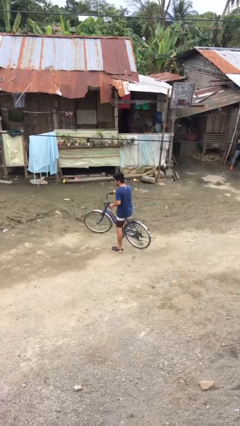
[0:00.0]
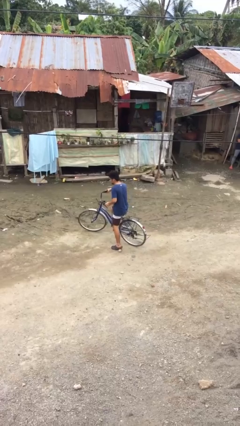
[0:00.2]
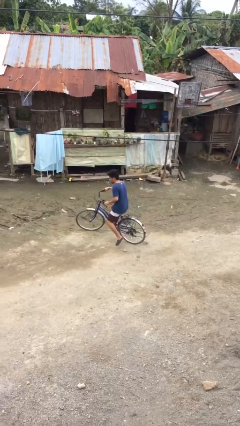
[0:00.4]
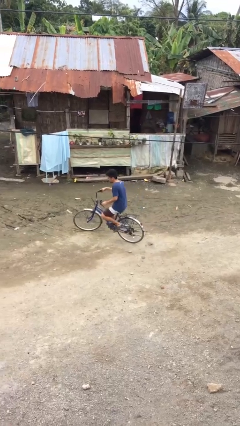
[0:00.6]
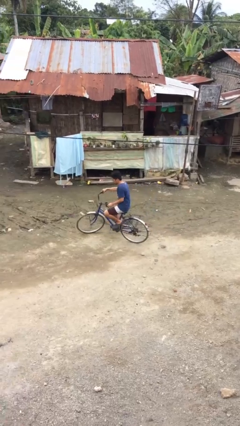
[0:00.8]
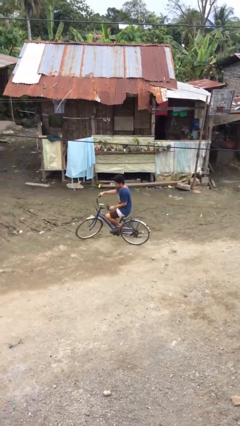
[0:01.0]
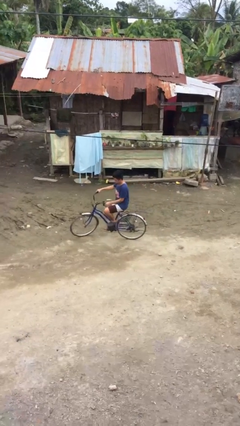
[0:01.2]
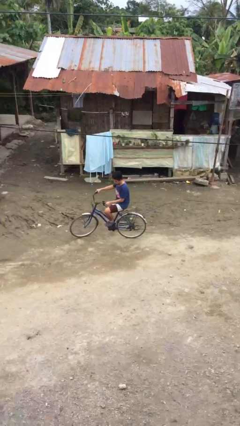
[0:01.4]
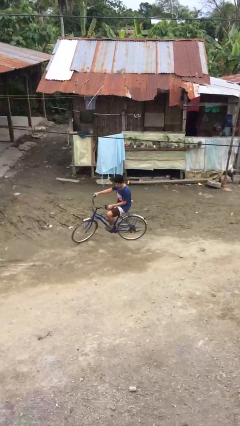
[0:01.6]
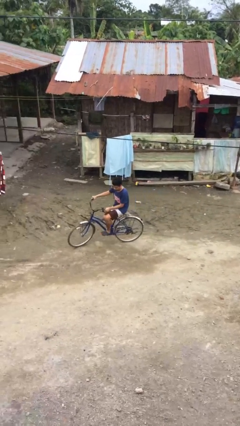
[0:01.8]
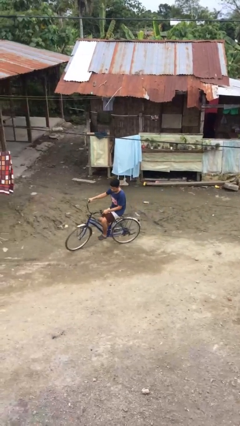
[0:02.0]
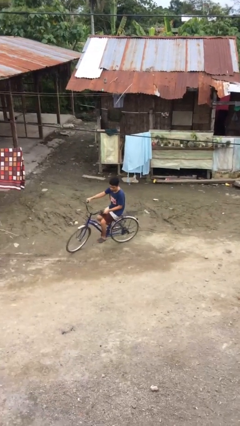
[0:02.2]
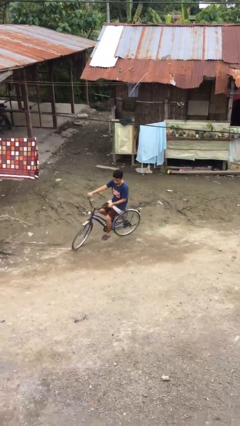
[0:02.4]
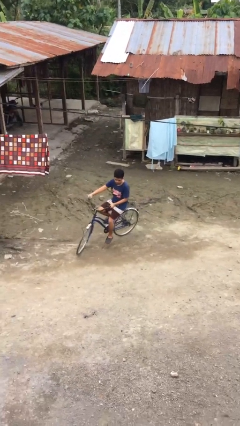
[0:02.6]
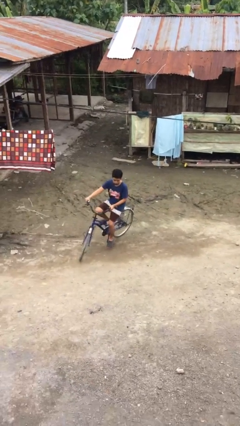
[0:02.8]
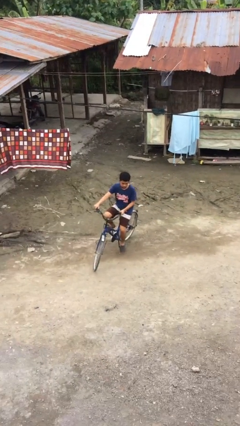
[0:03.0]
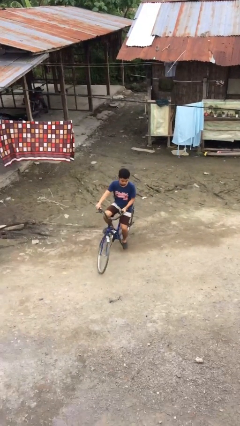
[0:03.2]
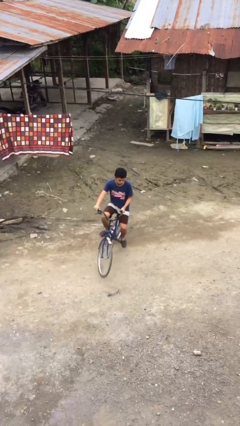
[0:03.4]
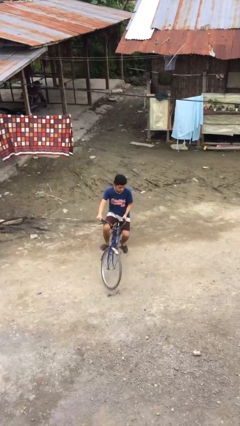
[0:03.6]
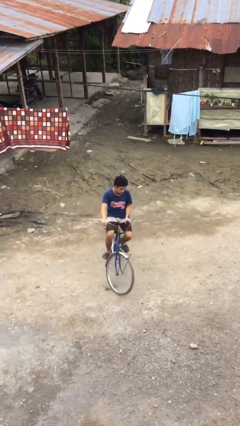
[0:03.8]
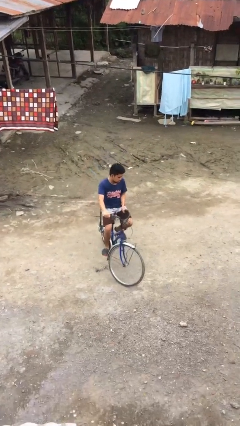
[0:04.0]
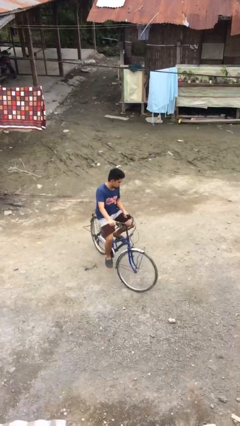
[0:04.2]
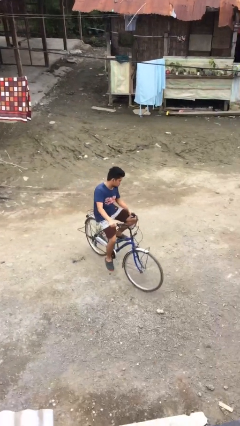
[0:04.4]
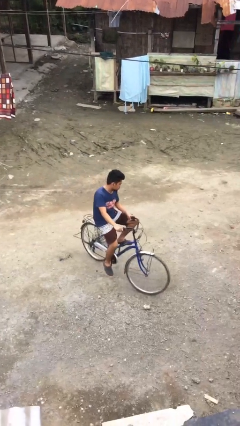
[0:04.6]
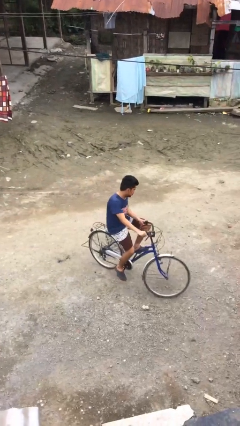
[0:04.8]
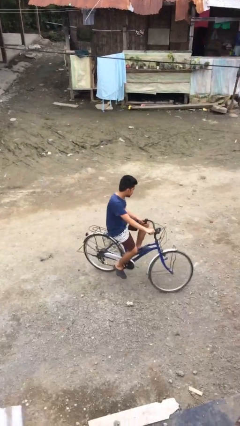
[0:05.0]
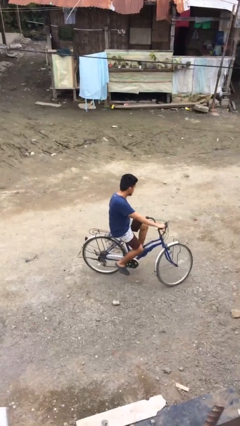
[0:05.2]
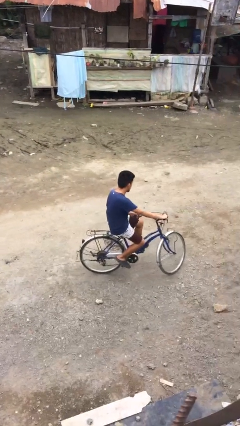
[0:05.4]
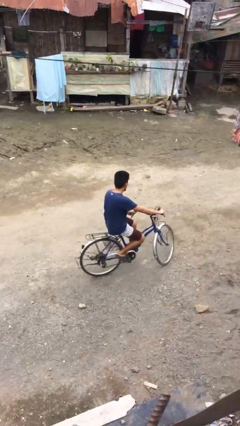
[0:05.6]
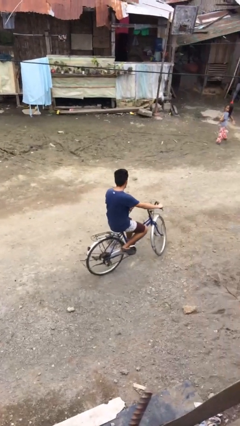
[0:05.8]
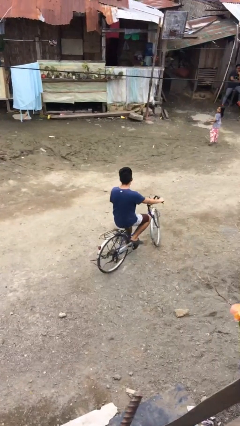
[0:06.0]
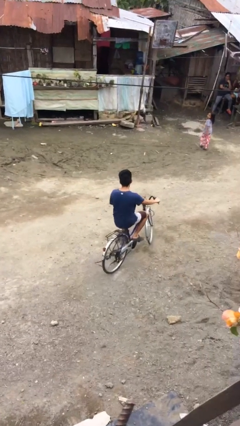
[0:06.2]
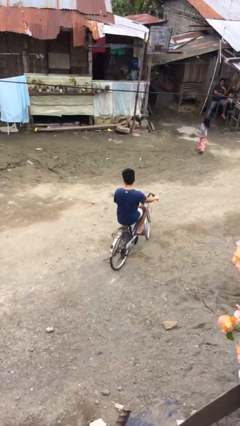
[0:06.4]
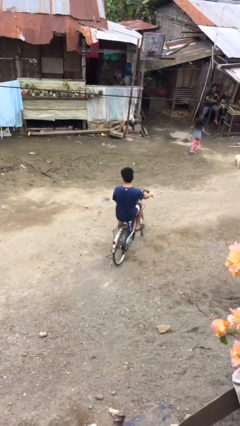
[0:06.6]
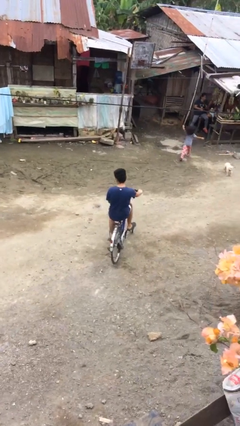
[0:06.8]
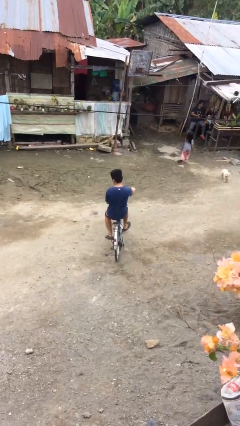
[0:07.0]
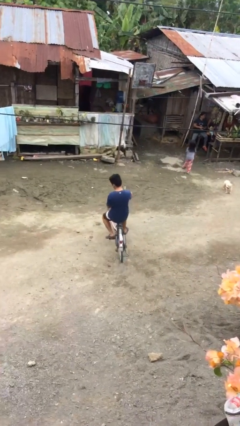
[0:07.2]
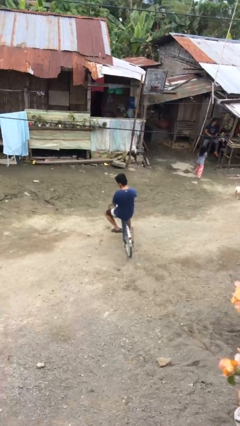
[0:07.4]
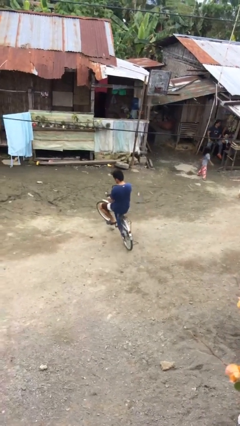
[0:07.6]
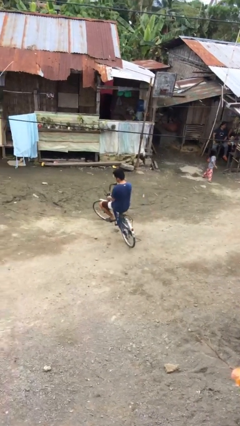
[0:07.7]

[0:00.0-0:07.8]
person rides bicycle

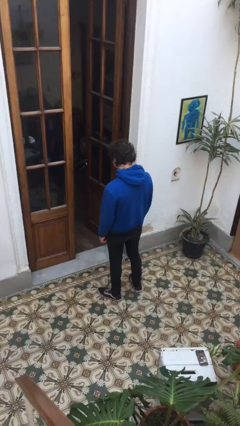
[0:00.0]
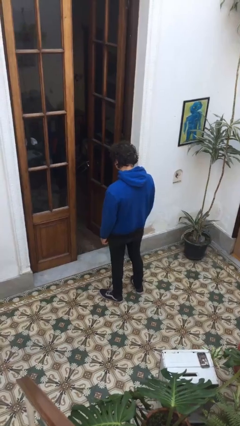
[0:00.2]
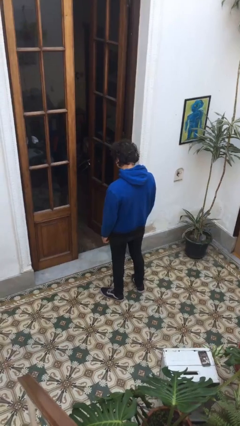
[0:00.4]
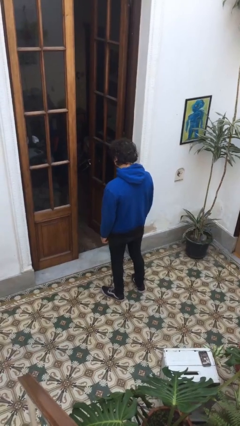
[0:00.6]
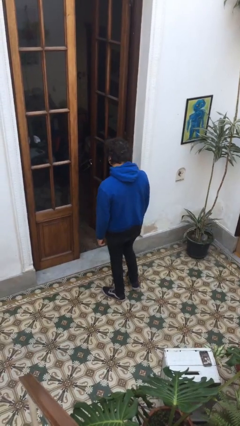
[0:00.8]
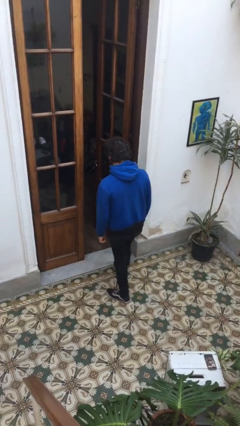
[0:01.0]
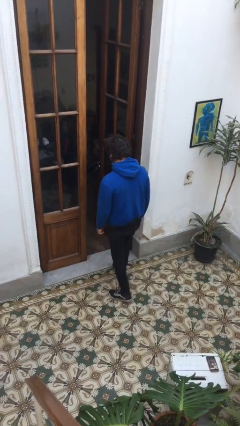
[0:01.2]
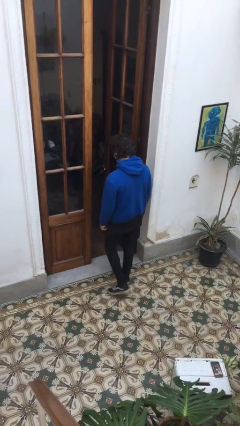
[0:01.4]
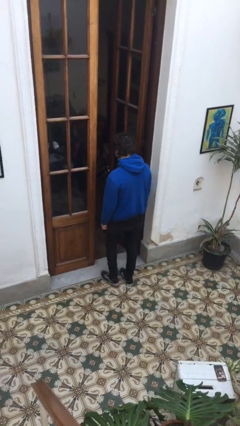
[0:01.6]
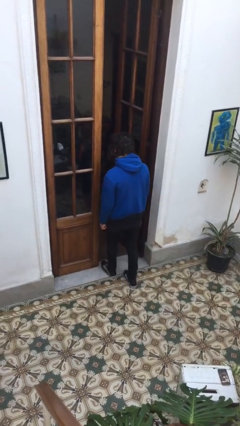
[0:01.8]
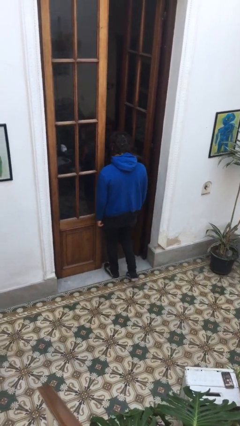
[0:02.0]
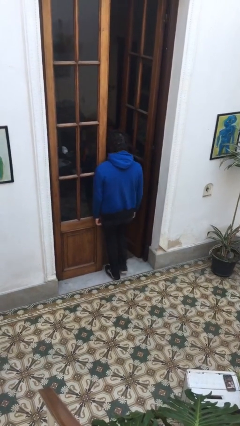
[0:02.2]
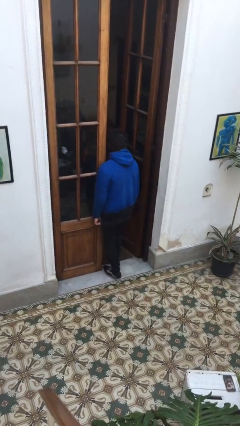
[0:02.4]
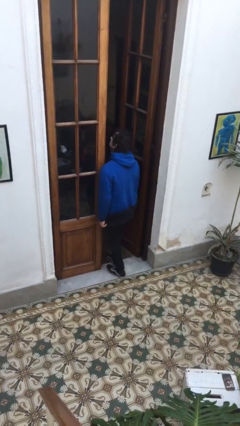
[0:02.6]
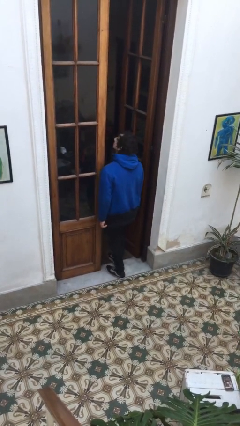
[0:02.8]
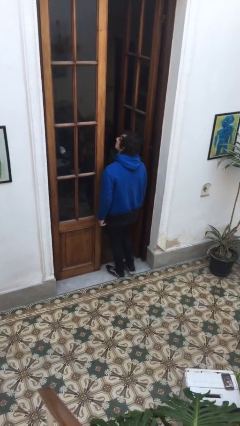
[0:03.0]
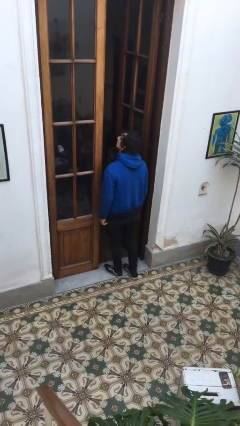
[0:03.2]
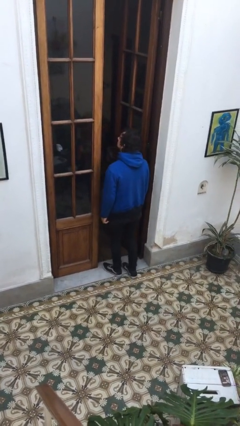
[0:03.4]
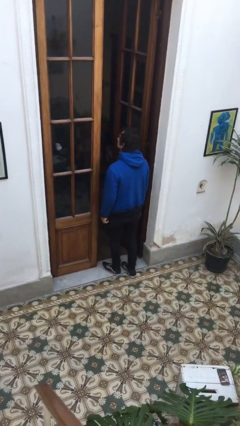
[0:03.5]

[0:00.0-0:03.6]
person bumps into wall

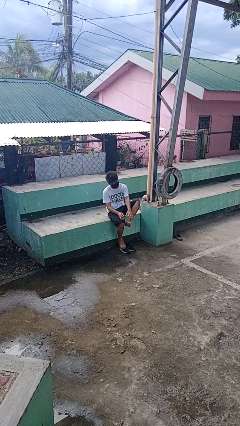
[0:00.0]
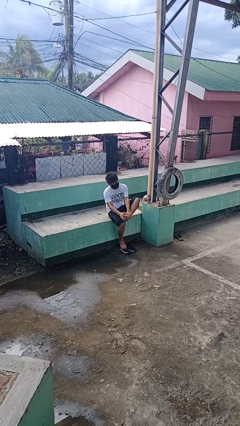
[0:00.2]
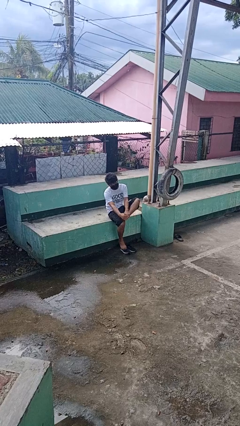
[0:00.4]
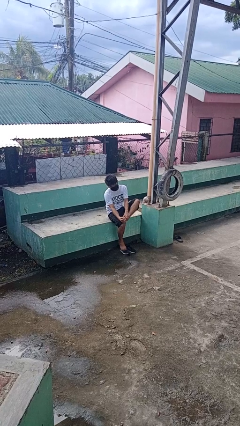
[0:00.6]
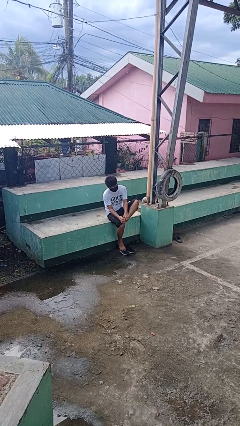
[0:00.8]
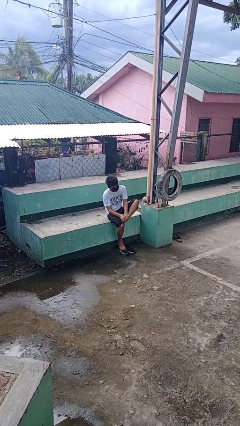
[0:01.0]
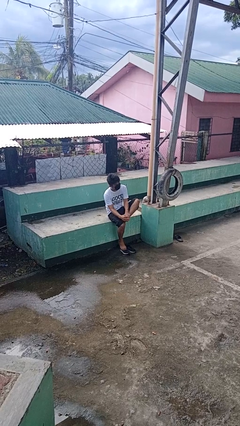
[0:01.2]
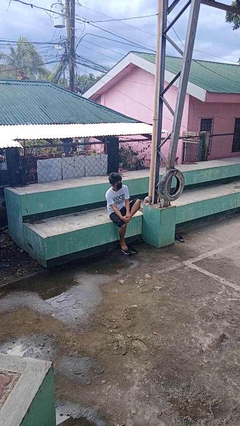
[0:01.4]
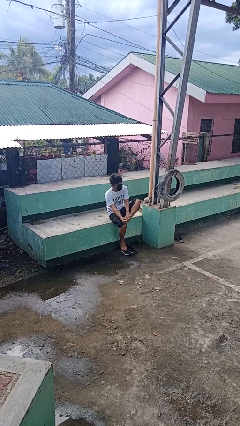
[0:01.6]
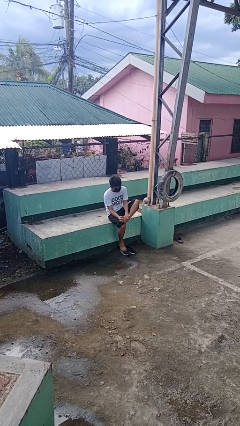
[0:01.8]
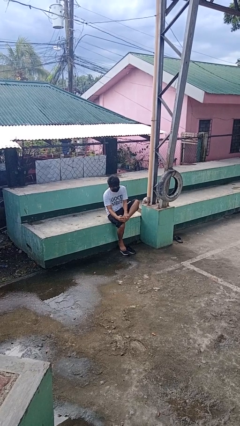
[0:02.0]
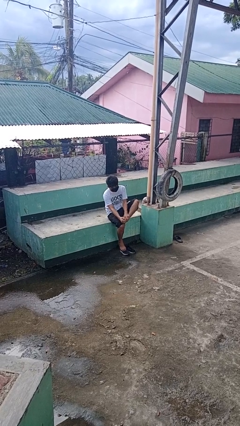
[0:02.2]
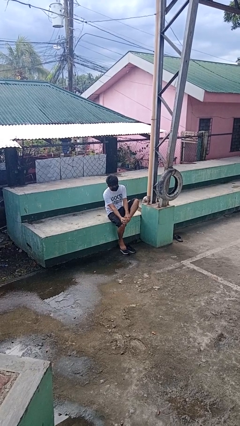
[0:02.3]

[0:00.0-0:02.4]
person rubs foot

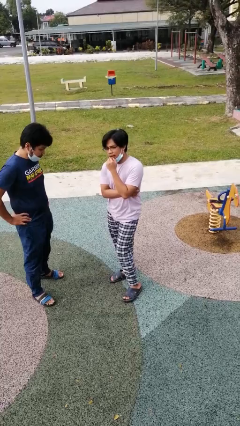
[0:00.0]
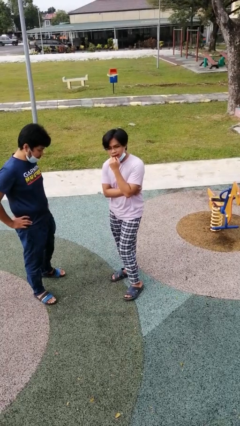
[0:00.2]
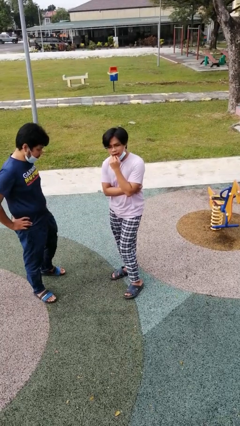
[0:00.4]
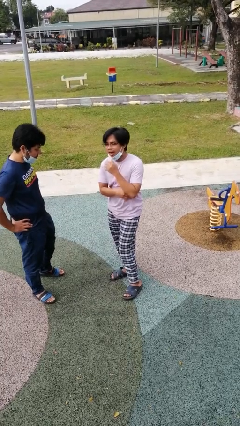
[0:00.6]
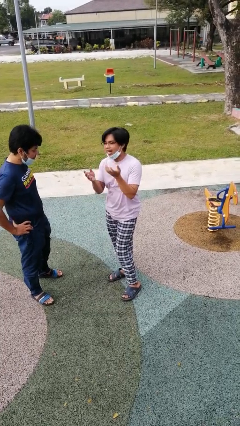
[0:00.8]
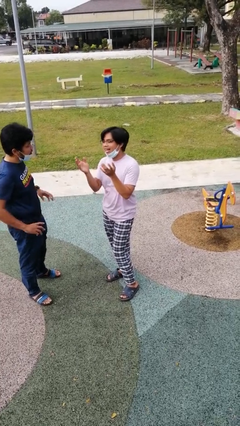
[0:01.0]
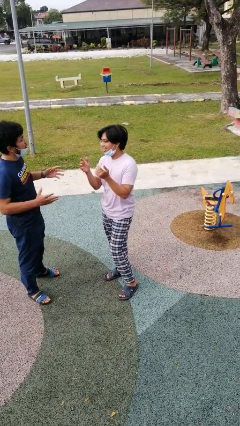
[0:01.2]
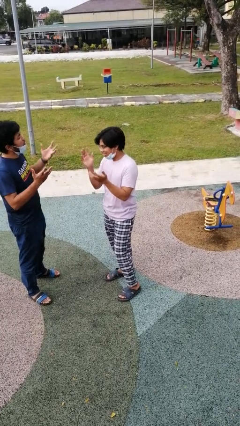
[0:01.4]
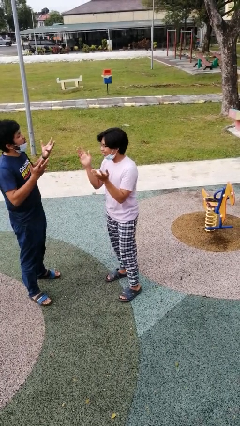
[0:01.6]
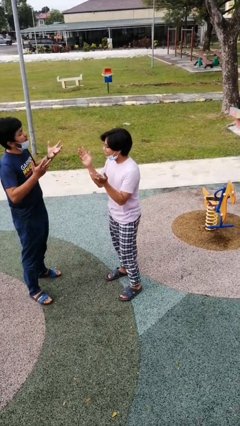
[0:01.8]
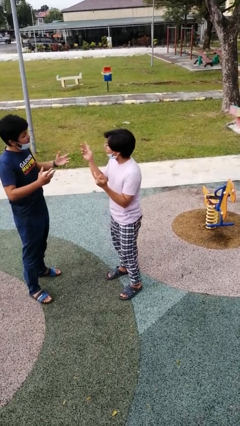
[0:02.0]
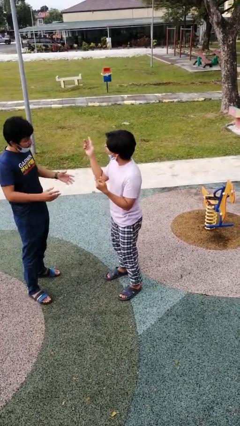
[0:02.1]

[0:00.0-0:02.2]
person talks to person

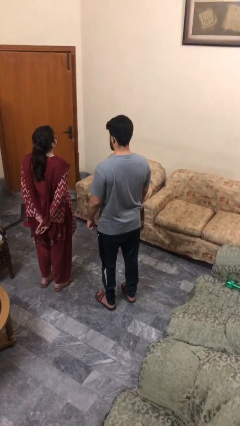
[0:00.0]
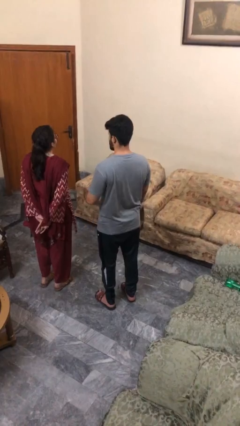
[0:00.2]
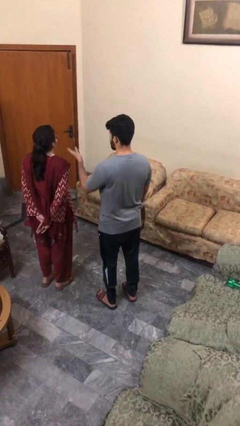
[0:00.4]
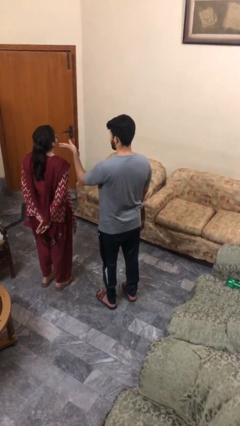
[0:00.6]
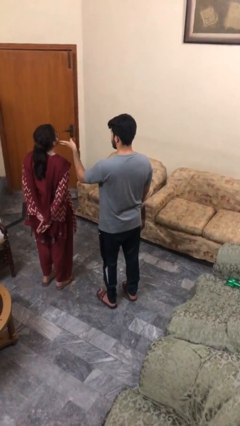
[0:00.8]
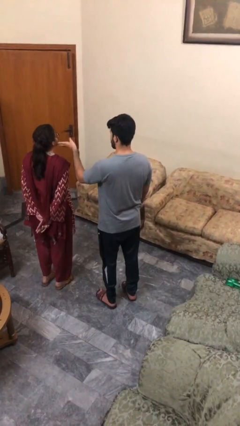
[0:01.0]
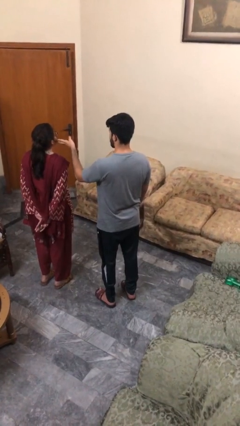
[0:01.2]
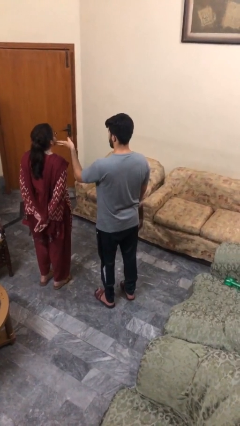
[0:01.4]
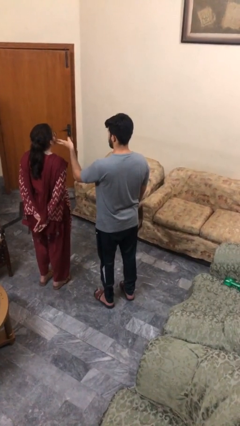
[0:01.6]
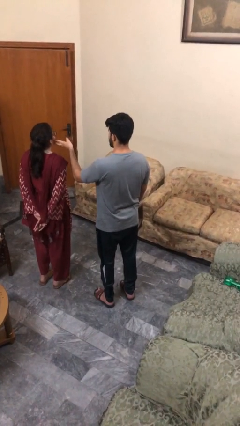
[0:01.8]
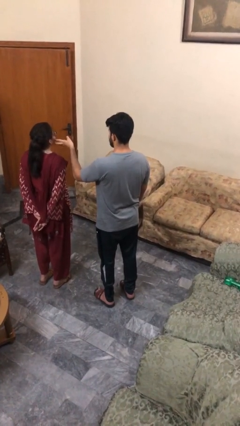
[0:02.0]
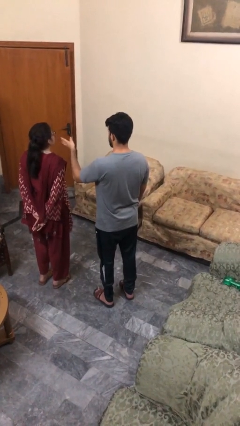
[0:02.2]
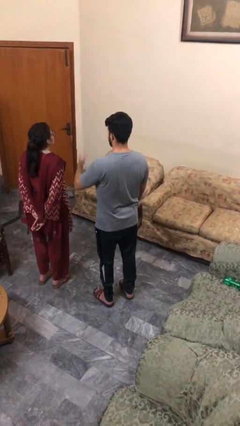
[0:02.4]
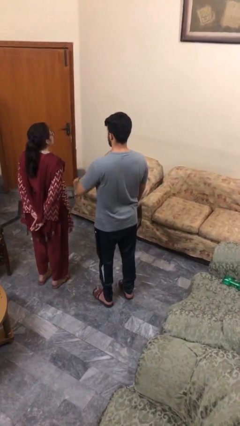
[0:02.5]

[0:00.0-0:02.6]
person touches face of person
